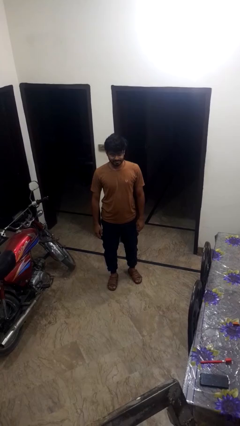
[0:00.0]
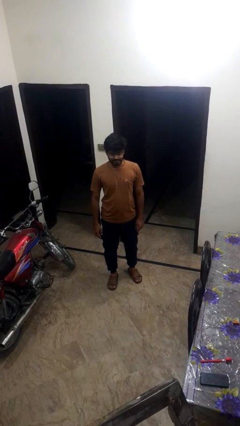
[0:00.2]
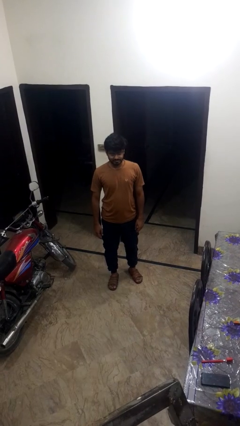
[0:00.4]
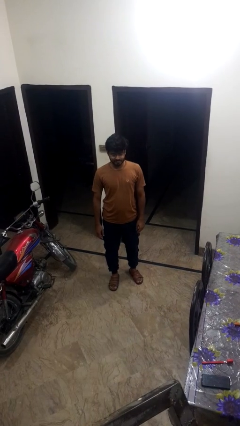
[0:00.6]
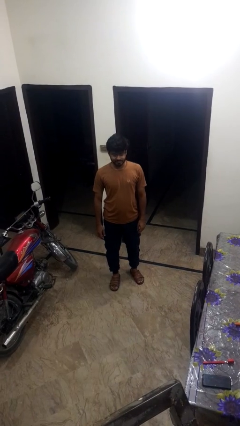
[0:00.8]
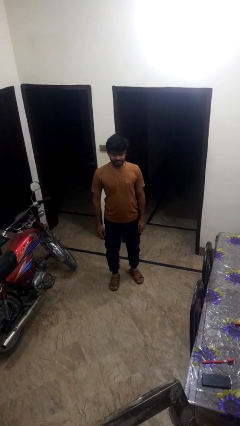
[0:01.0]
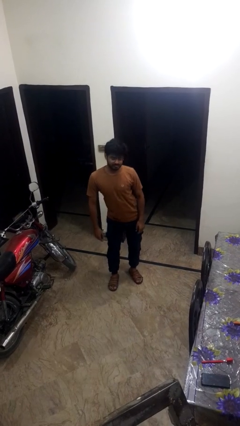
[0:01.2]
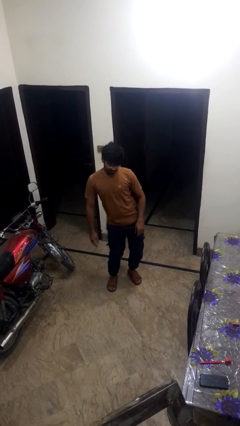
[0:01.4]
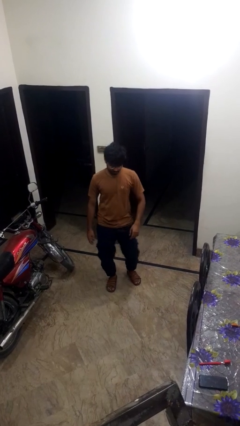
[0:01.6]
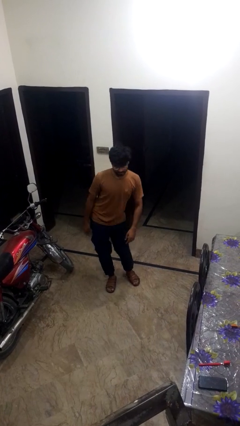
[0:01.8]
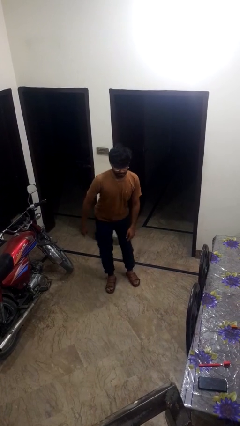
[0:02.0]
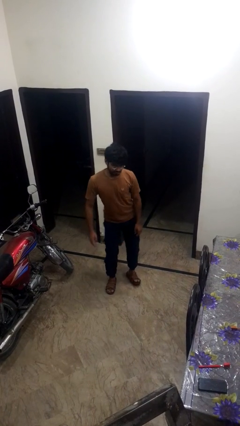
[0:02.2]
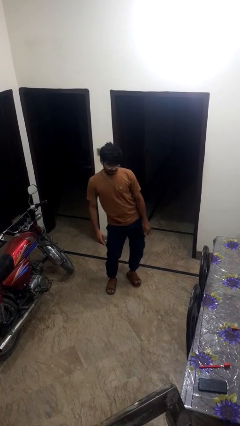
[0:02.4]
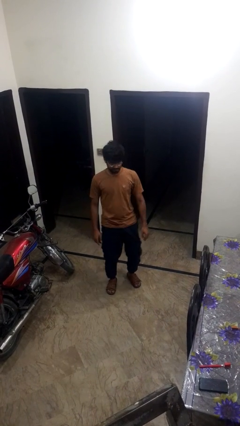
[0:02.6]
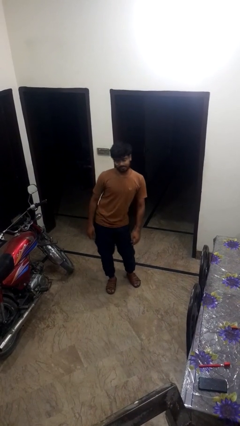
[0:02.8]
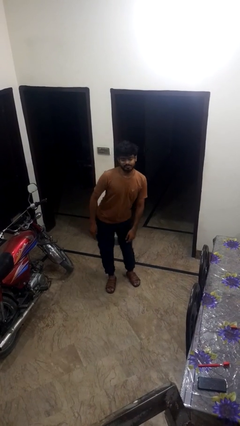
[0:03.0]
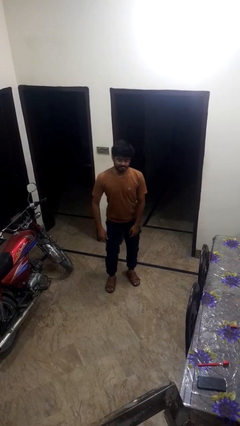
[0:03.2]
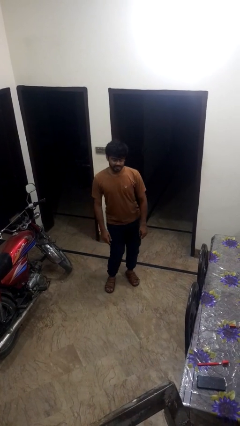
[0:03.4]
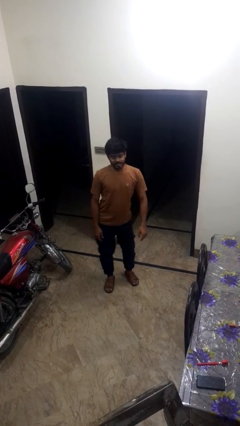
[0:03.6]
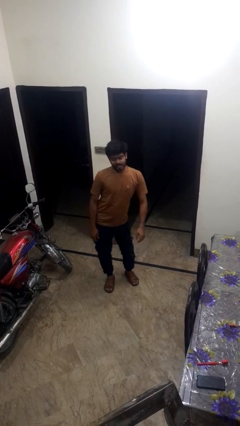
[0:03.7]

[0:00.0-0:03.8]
person wiggles hips

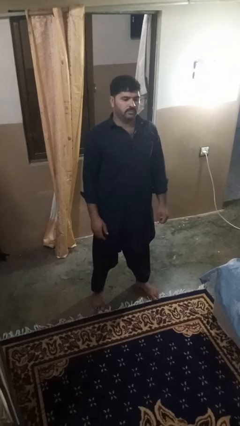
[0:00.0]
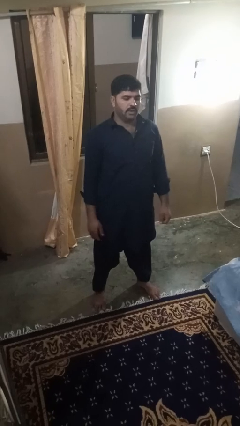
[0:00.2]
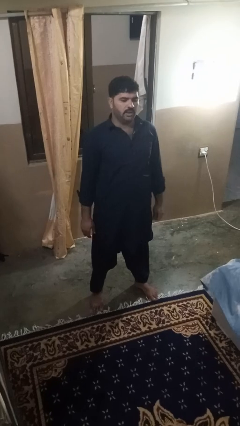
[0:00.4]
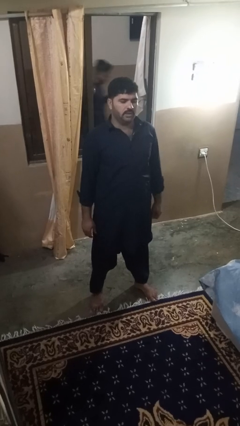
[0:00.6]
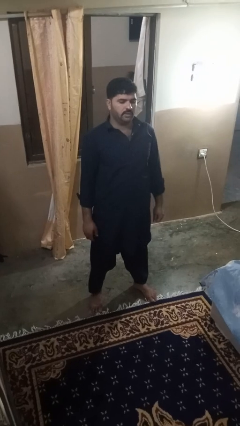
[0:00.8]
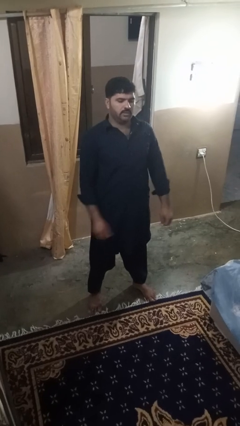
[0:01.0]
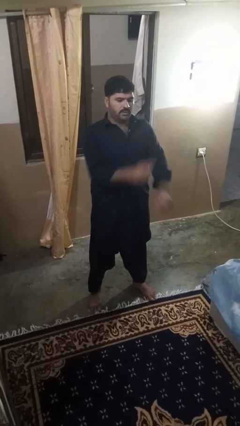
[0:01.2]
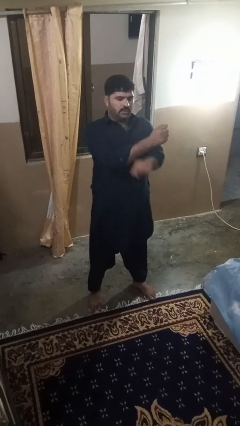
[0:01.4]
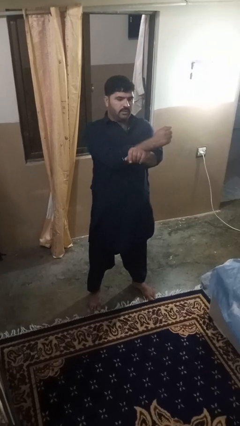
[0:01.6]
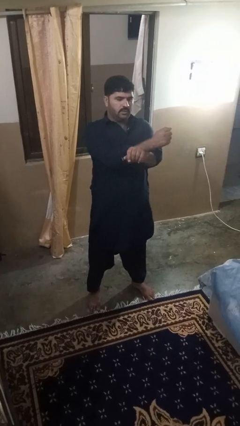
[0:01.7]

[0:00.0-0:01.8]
person crosses arms

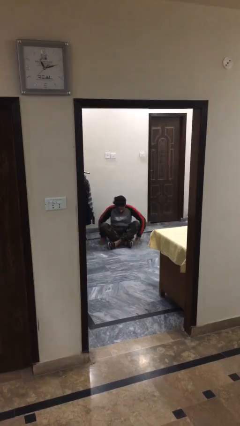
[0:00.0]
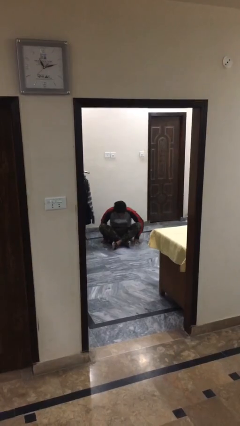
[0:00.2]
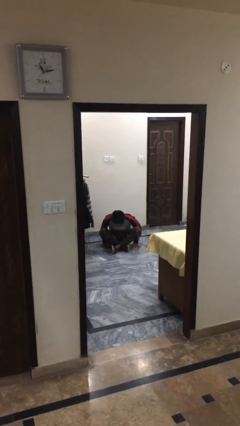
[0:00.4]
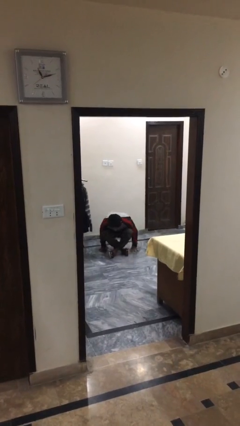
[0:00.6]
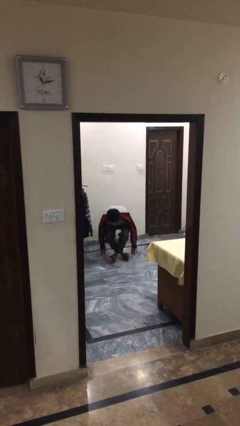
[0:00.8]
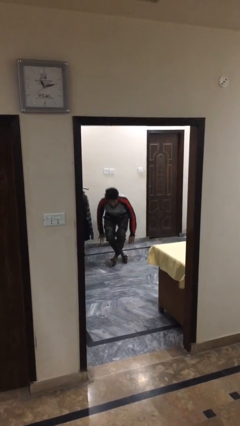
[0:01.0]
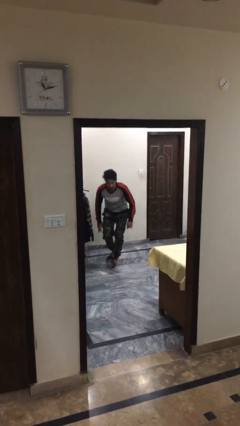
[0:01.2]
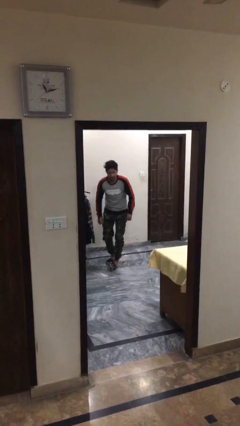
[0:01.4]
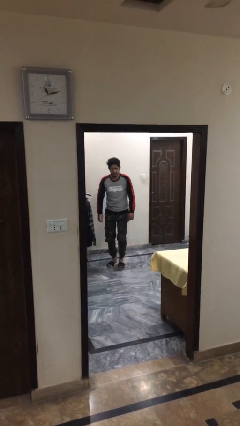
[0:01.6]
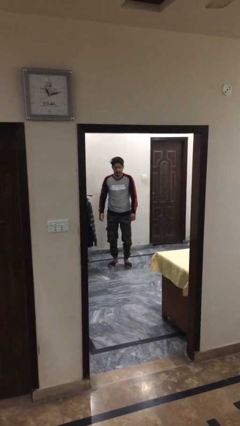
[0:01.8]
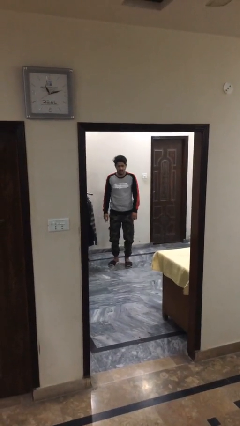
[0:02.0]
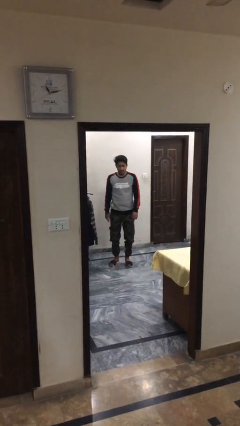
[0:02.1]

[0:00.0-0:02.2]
person stands up

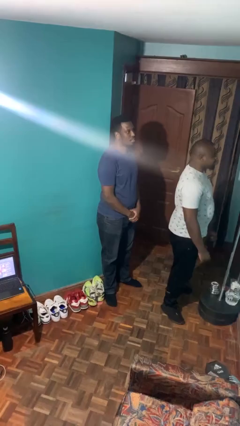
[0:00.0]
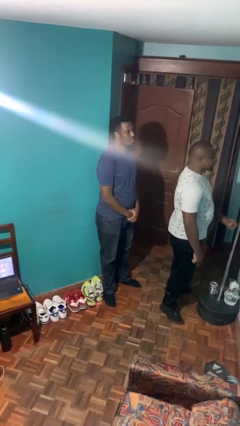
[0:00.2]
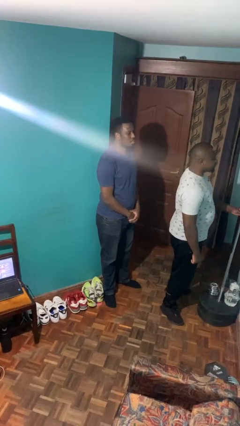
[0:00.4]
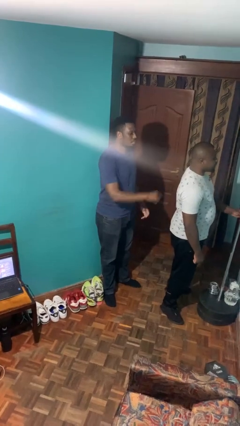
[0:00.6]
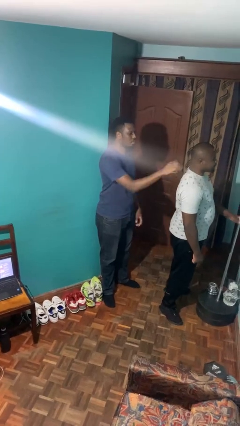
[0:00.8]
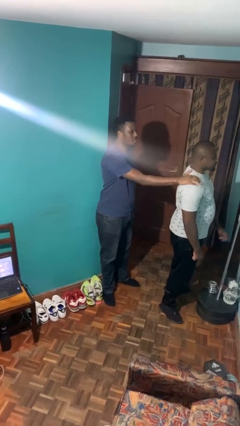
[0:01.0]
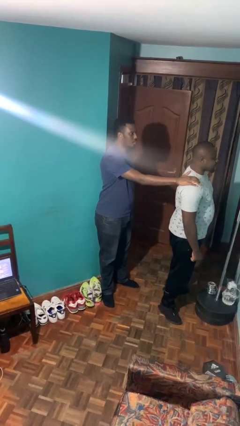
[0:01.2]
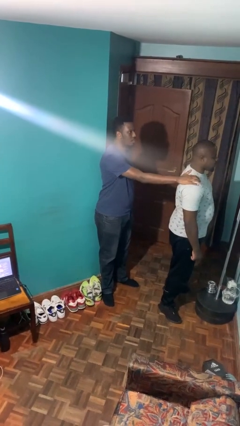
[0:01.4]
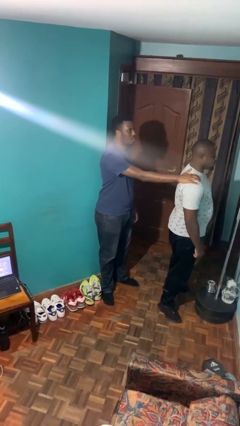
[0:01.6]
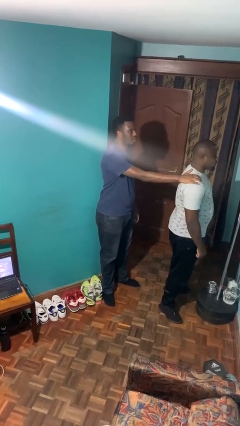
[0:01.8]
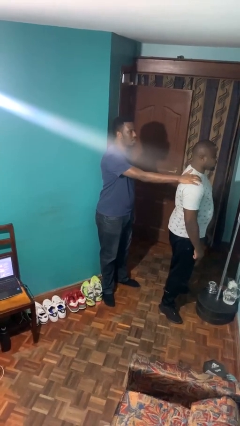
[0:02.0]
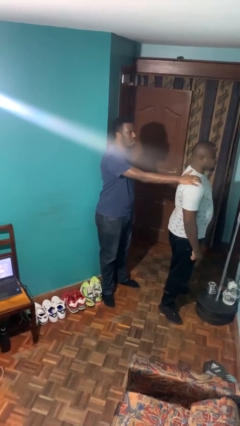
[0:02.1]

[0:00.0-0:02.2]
person grabs person by shoulder

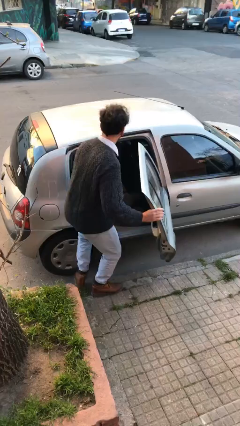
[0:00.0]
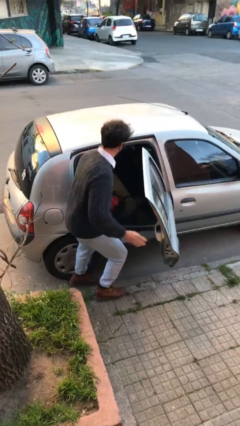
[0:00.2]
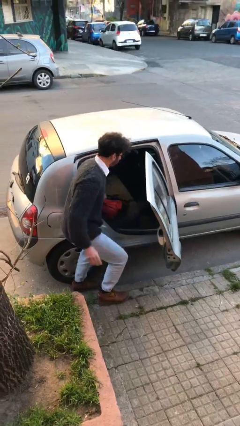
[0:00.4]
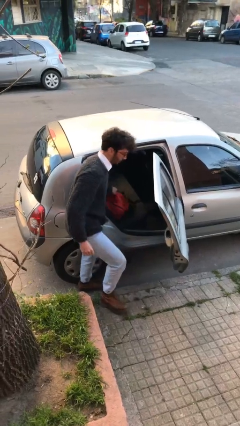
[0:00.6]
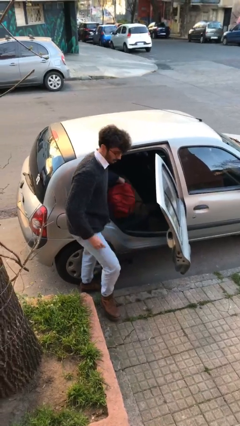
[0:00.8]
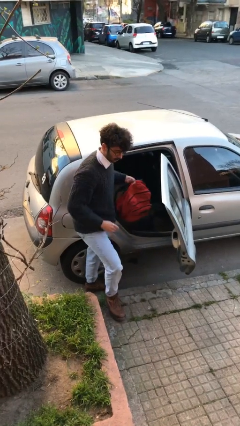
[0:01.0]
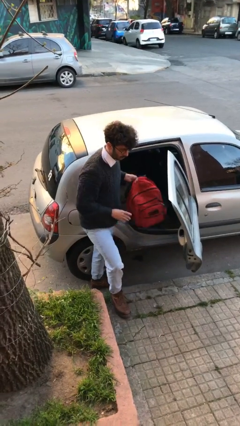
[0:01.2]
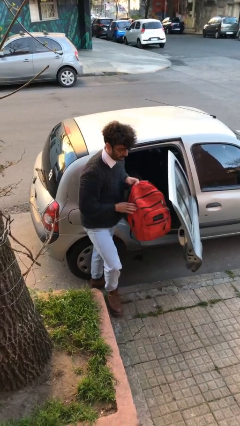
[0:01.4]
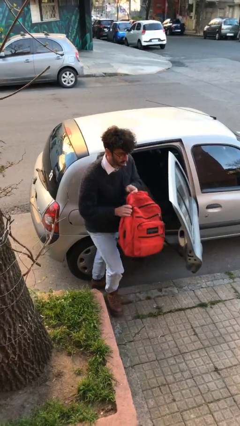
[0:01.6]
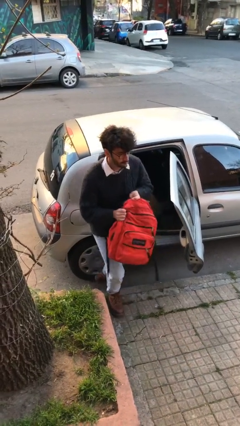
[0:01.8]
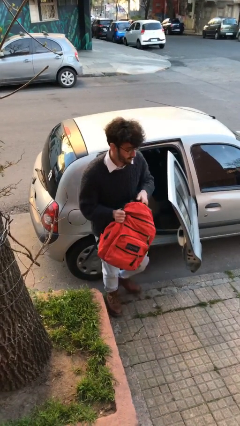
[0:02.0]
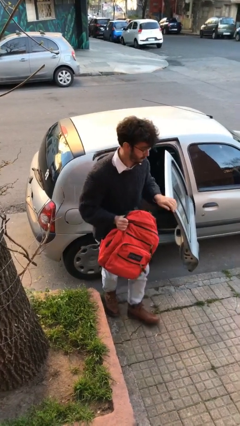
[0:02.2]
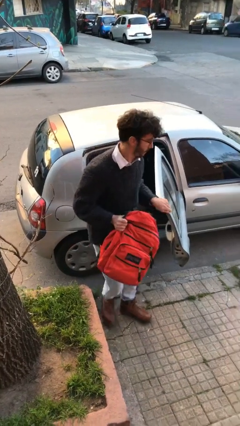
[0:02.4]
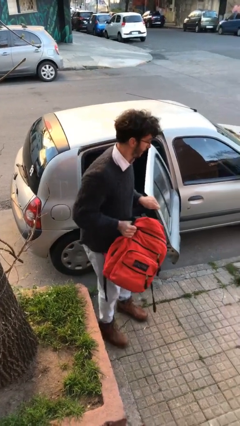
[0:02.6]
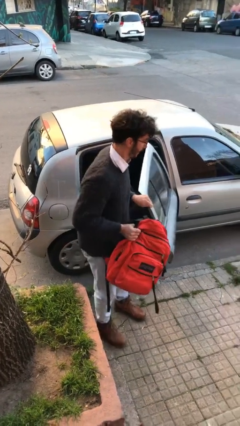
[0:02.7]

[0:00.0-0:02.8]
person unloads car

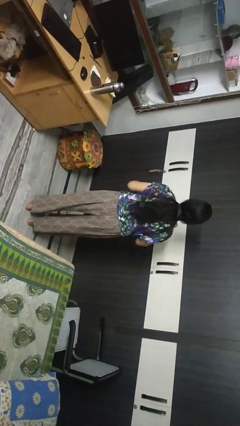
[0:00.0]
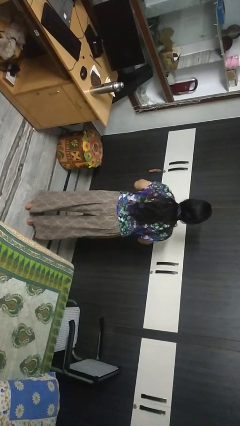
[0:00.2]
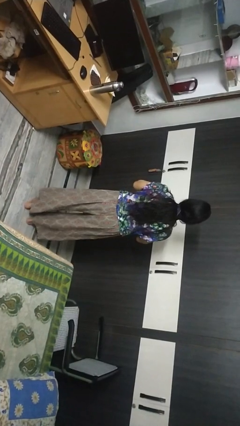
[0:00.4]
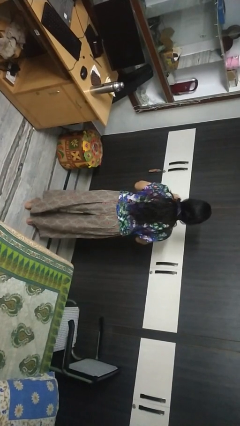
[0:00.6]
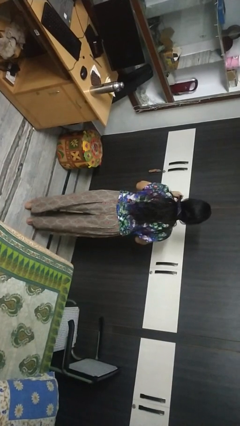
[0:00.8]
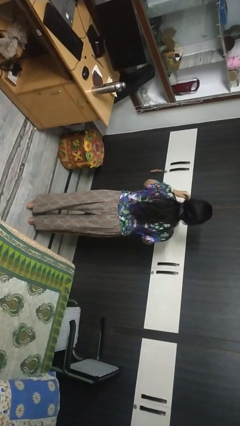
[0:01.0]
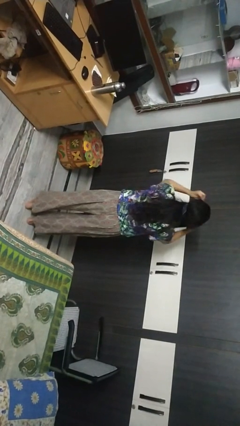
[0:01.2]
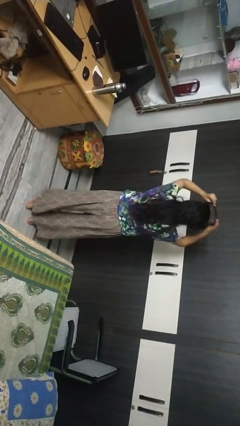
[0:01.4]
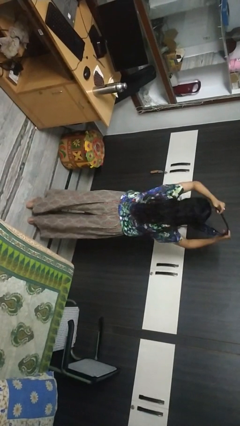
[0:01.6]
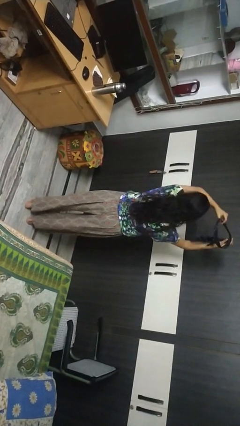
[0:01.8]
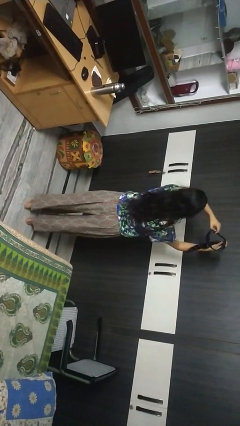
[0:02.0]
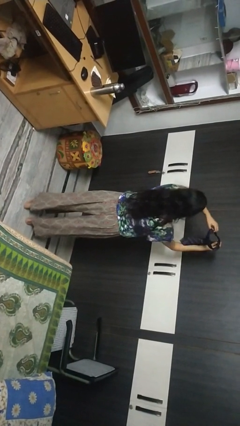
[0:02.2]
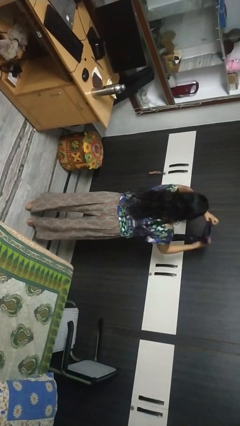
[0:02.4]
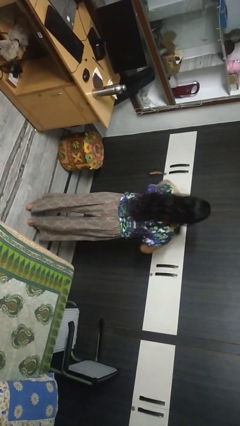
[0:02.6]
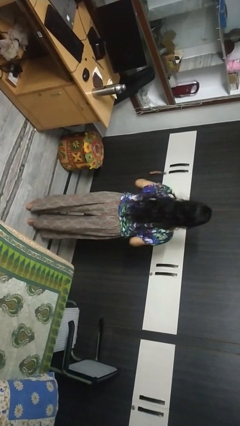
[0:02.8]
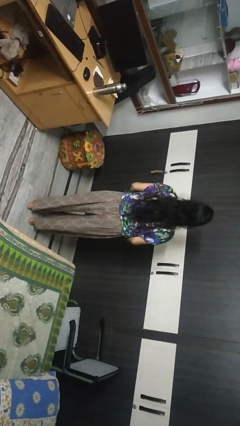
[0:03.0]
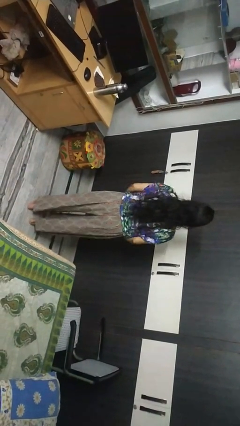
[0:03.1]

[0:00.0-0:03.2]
person takes off necktie

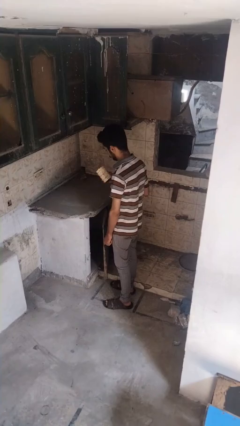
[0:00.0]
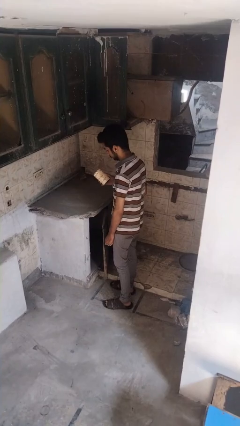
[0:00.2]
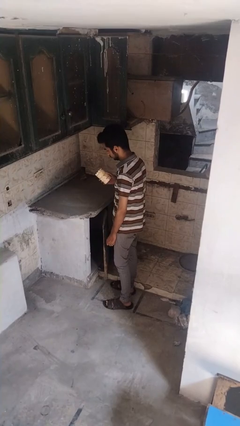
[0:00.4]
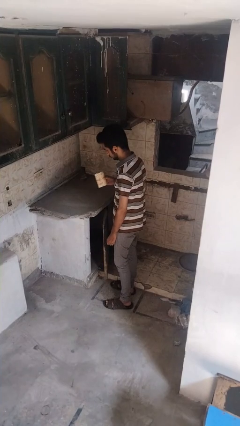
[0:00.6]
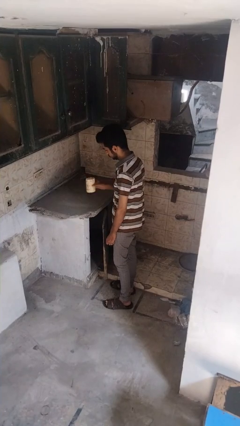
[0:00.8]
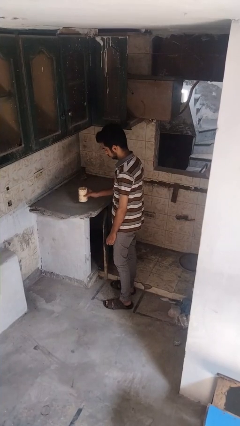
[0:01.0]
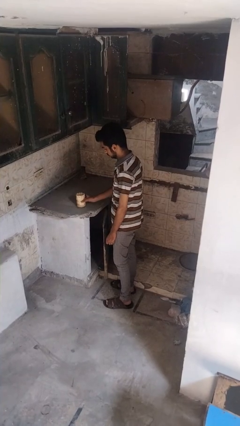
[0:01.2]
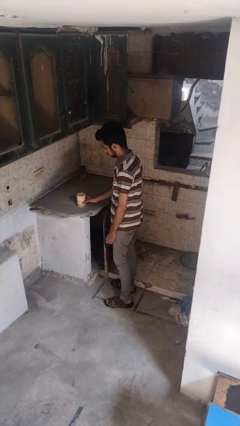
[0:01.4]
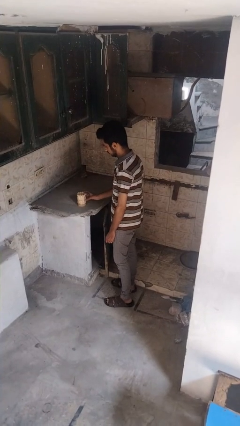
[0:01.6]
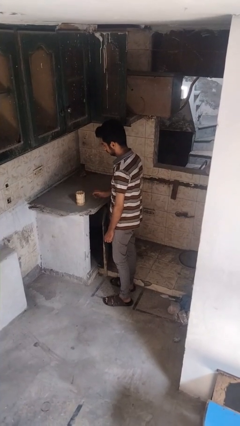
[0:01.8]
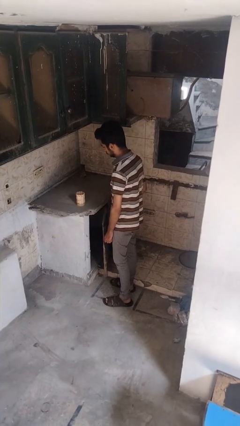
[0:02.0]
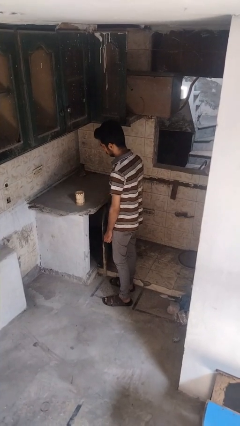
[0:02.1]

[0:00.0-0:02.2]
person puts down object on countertop
